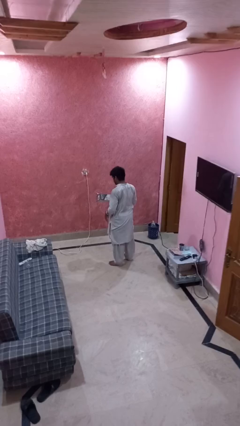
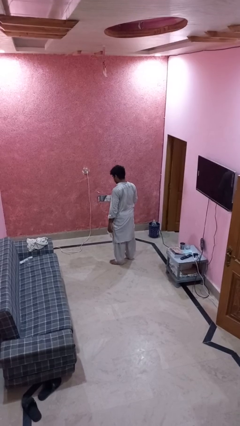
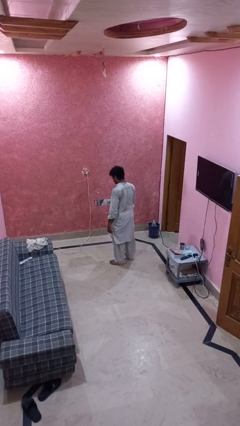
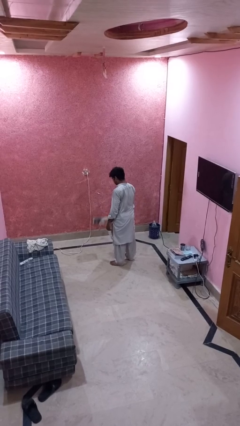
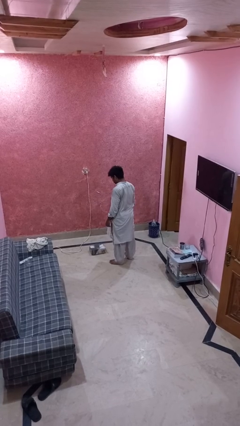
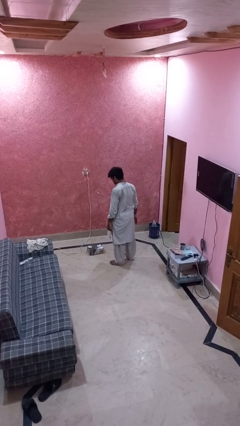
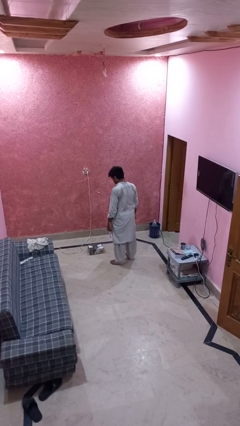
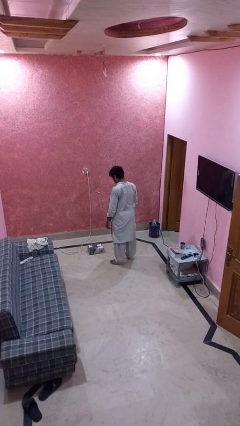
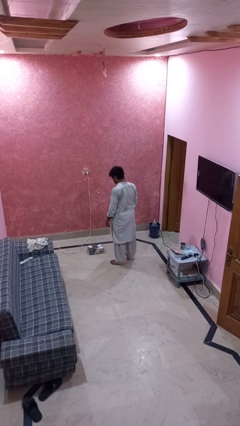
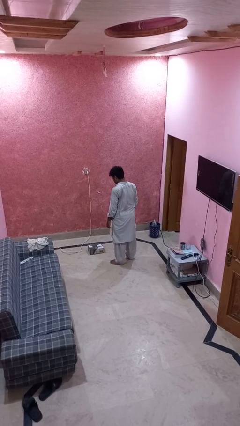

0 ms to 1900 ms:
person throws object to ground

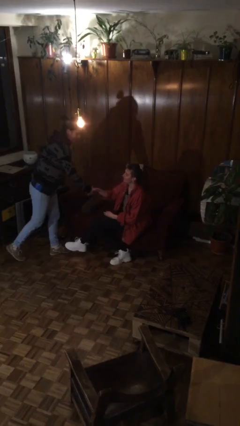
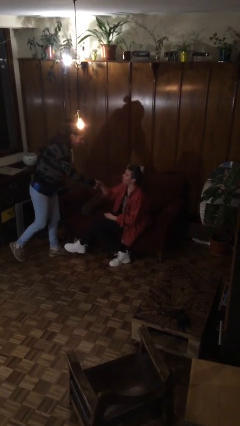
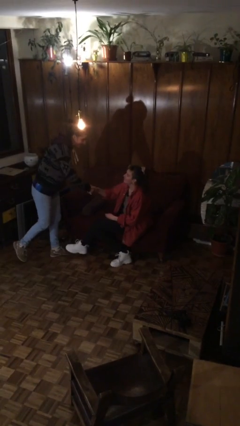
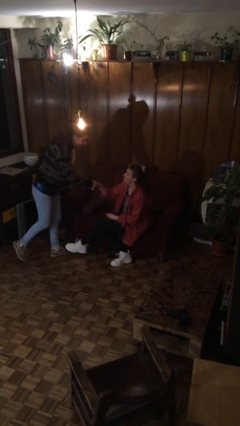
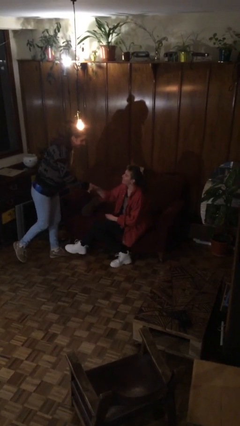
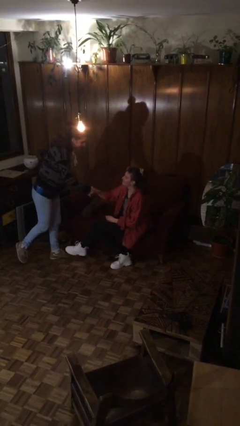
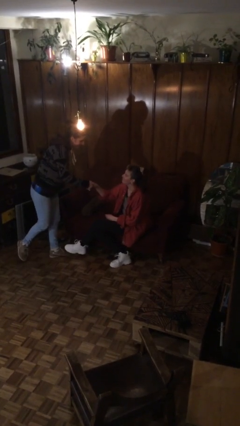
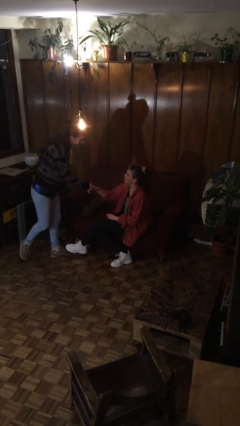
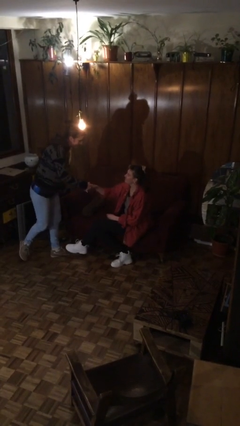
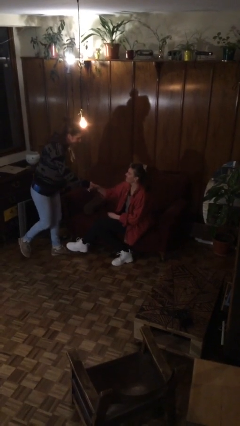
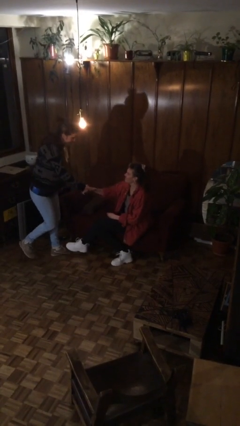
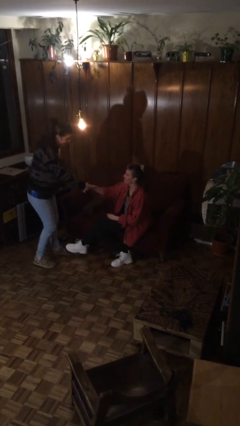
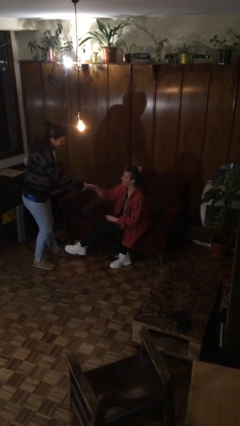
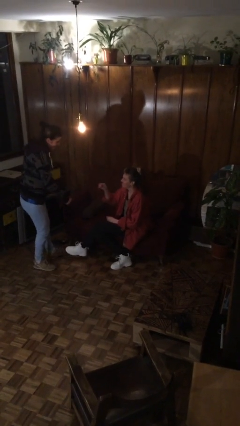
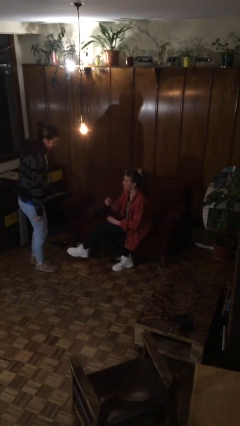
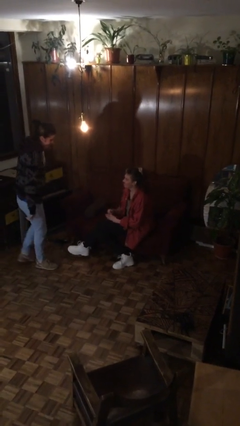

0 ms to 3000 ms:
person shakes hand

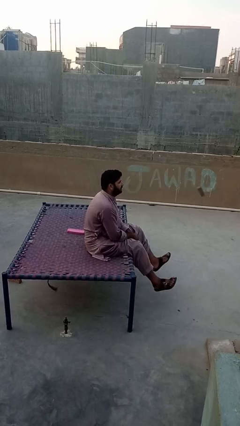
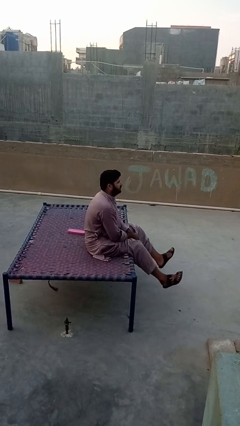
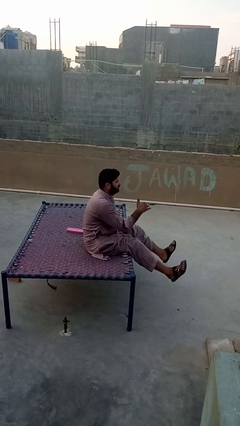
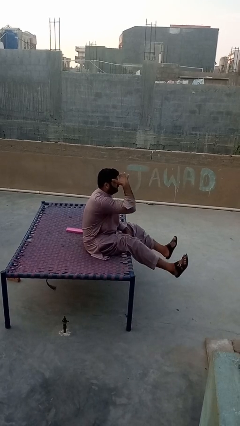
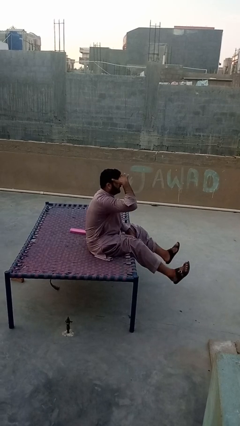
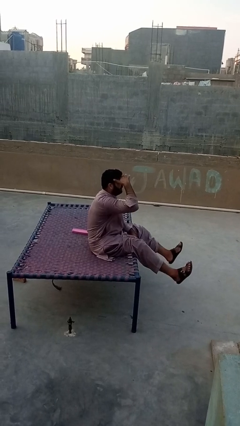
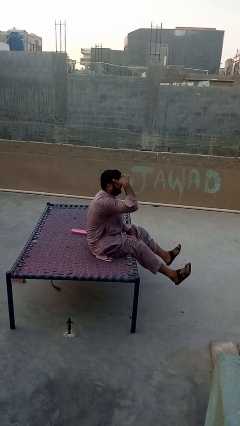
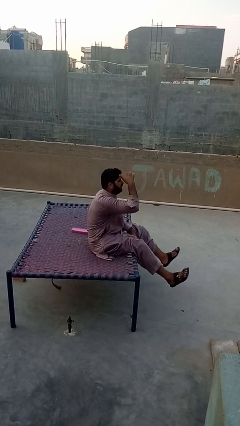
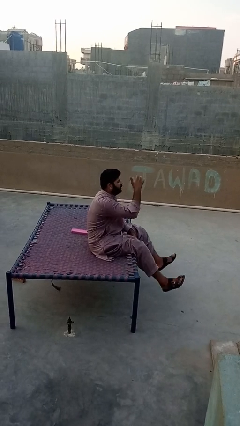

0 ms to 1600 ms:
person shades eyes

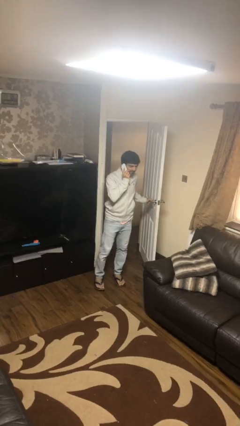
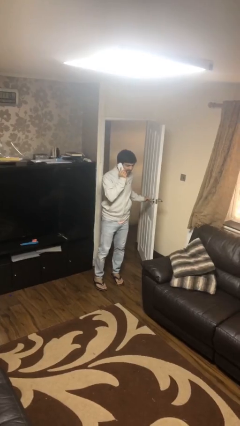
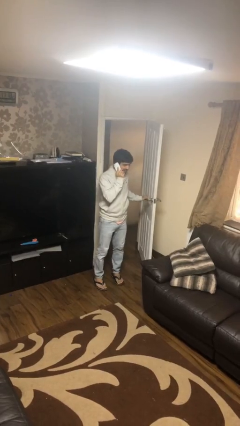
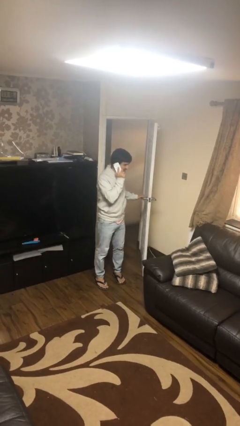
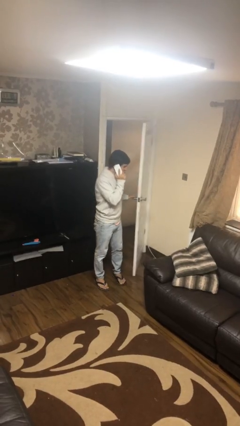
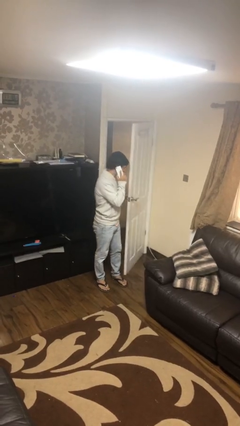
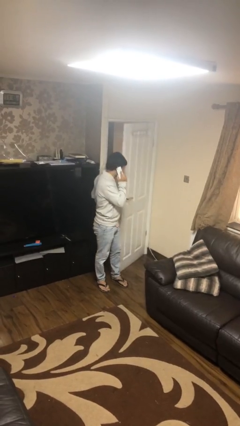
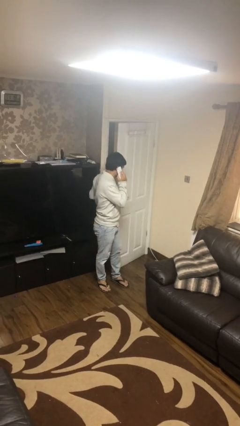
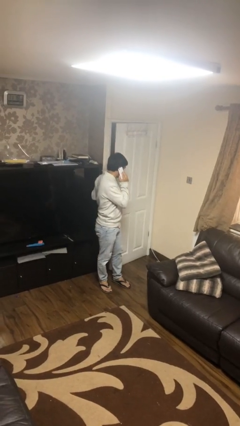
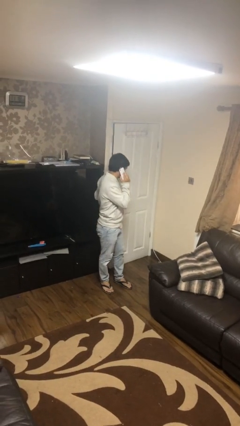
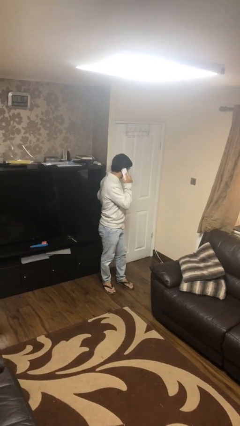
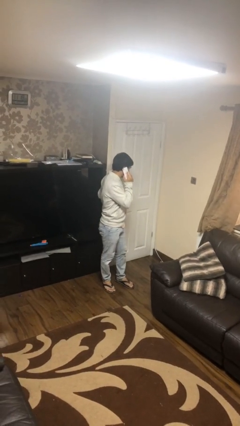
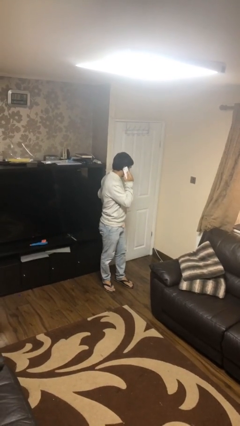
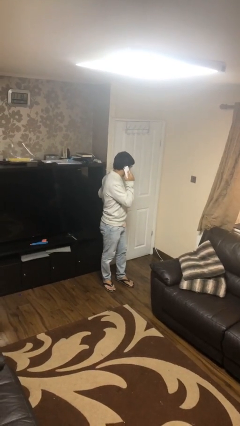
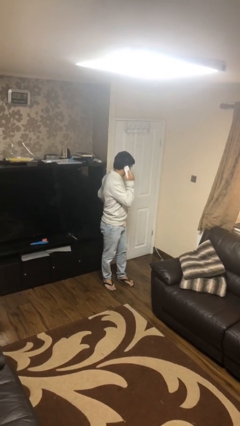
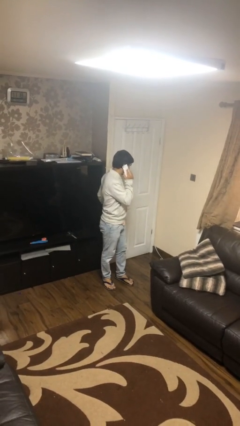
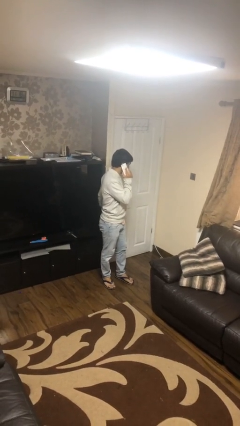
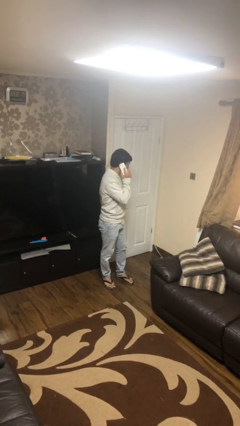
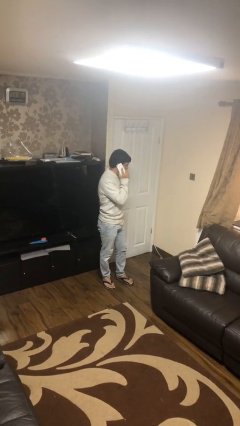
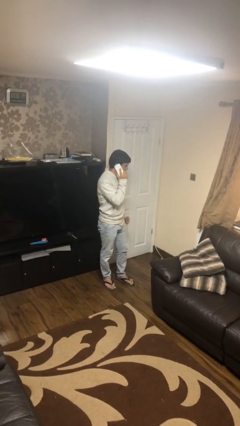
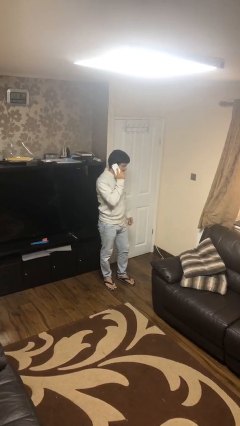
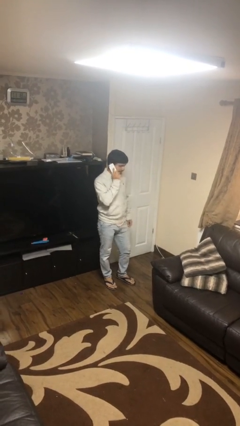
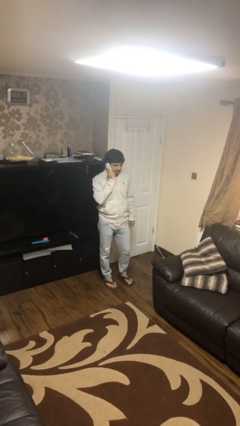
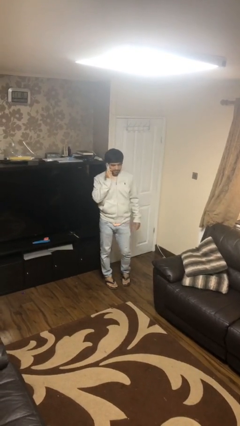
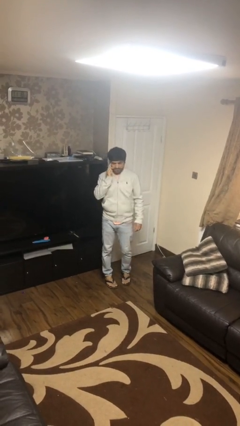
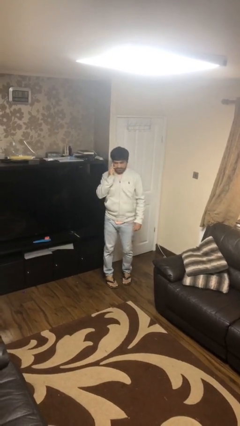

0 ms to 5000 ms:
person closes facility door

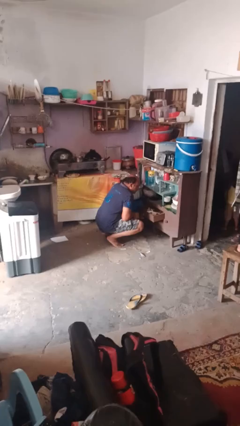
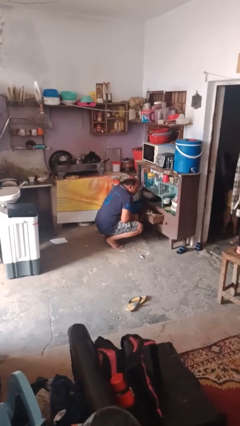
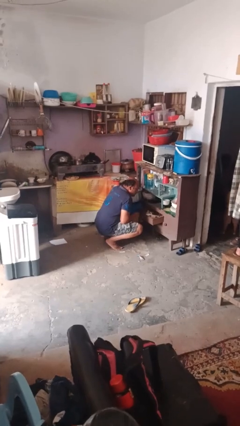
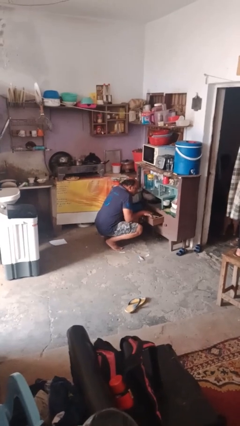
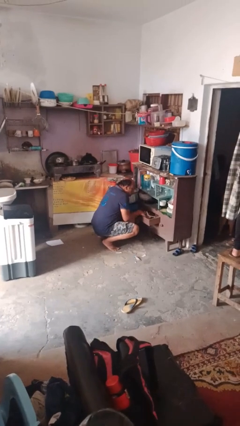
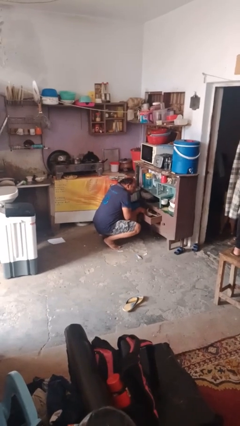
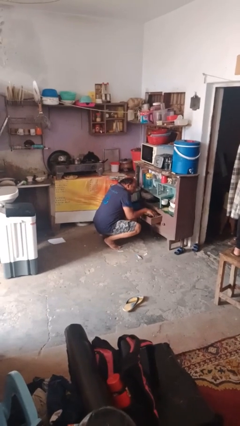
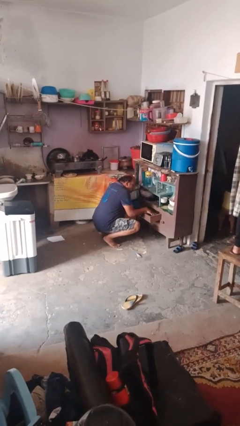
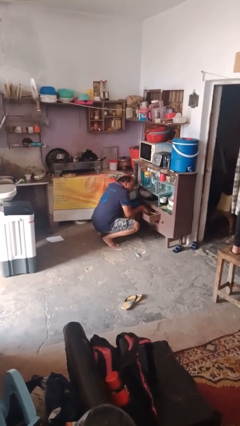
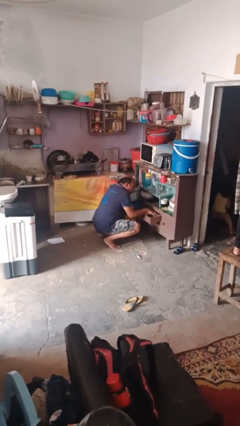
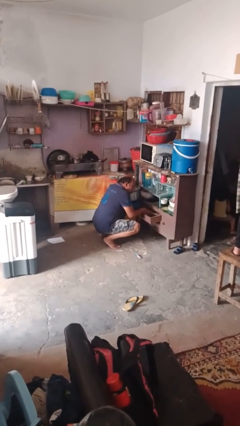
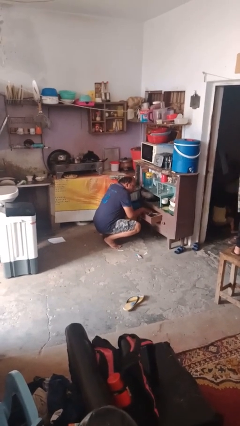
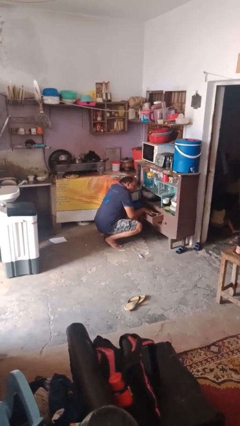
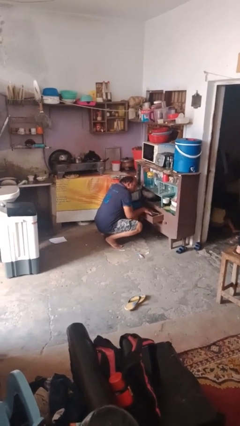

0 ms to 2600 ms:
person searches in kitchen drawer

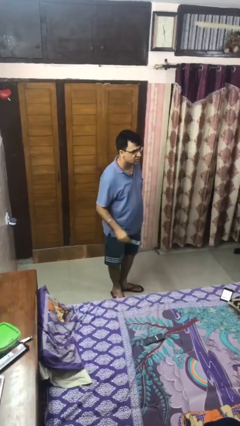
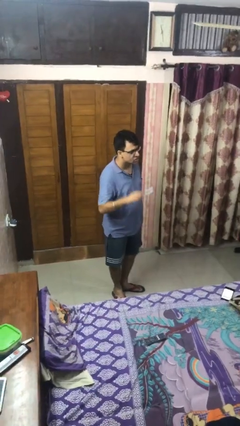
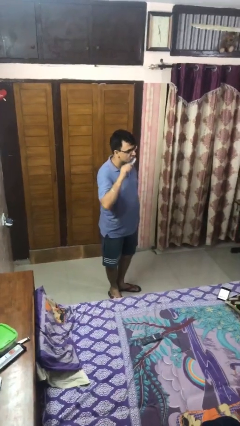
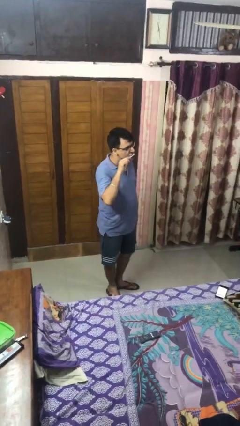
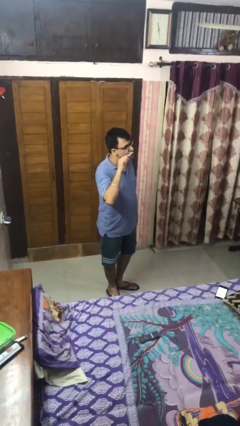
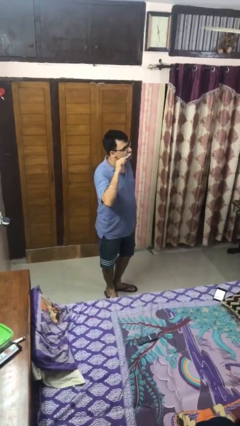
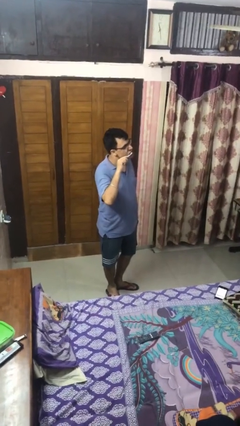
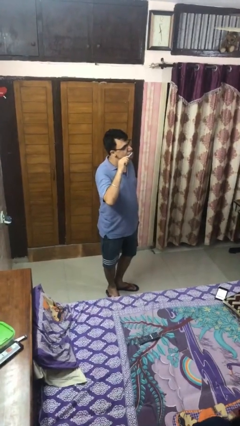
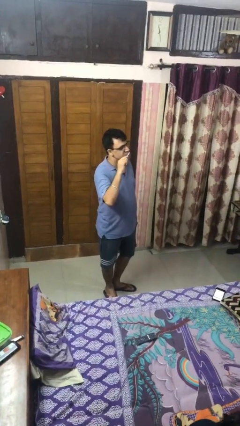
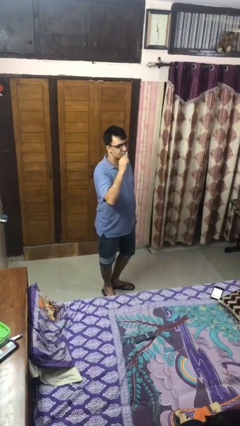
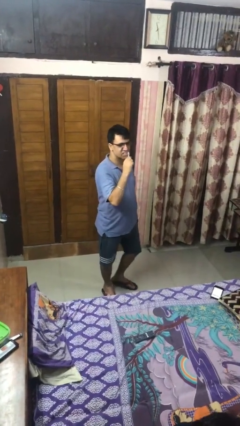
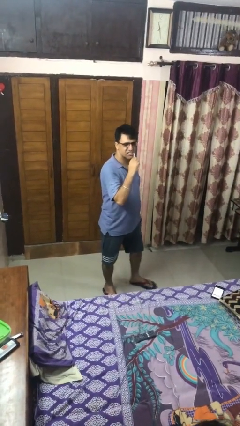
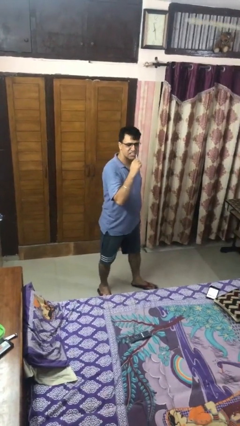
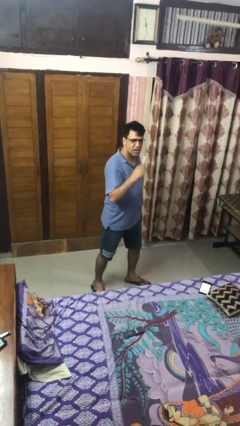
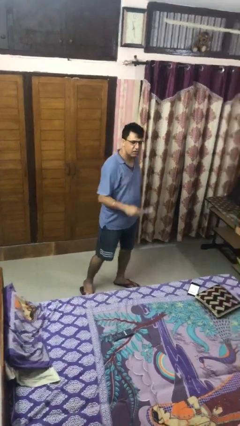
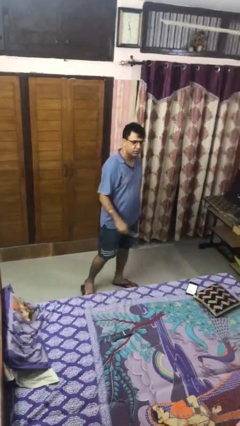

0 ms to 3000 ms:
person brushes teeth

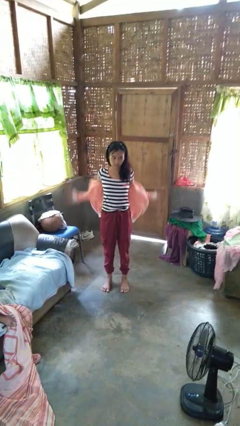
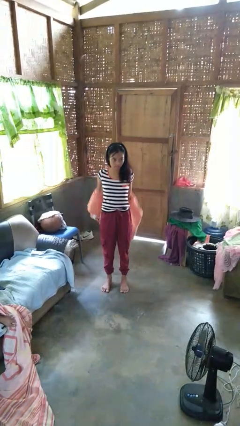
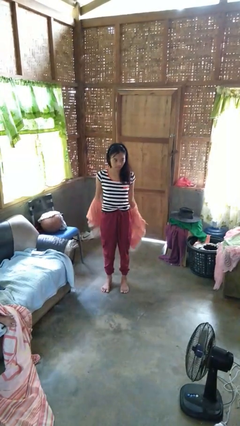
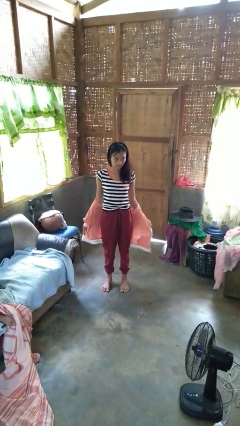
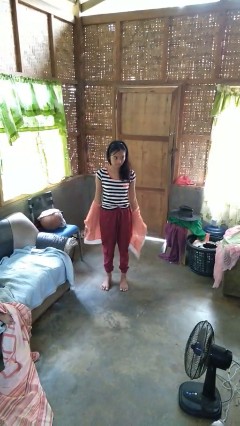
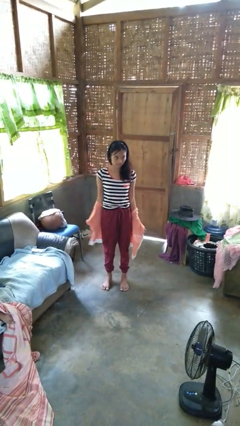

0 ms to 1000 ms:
person takes off jacket
